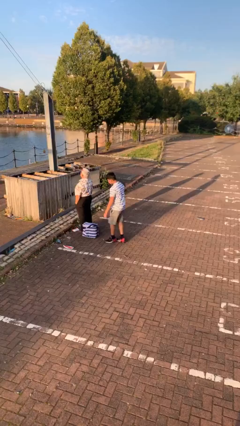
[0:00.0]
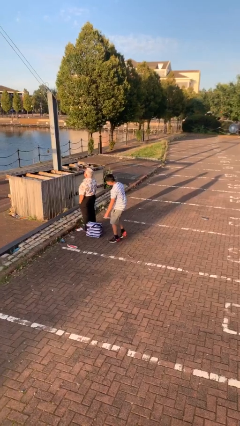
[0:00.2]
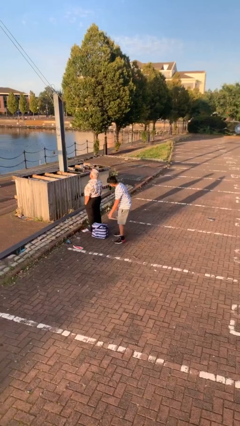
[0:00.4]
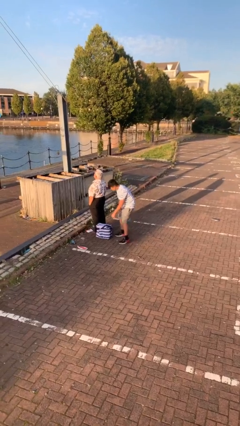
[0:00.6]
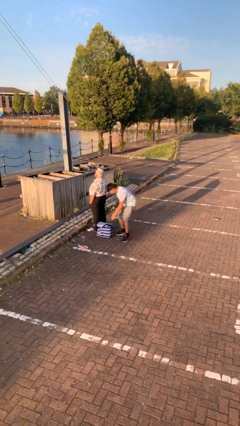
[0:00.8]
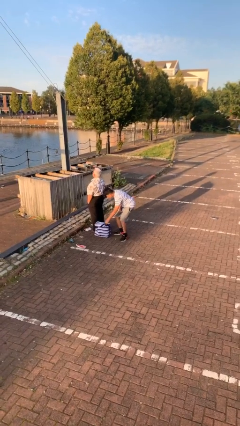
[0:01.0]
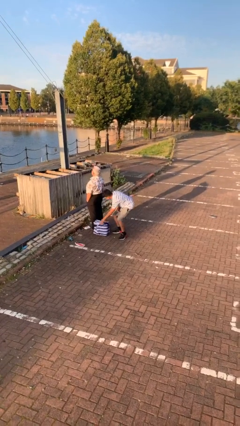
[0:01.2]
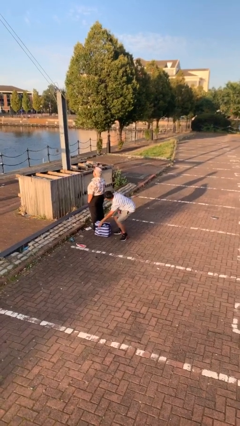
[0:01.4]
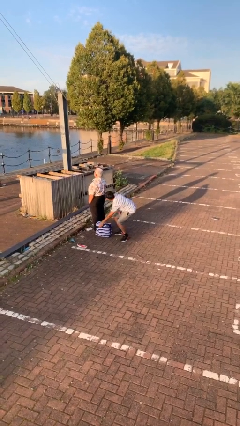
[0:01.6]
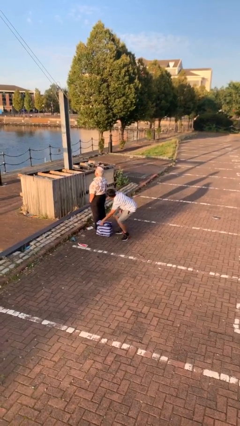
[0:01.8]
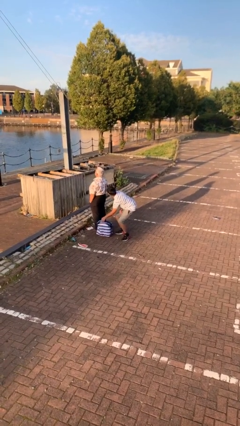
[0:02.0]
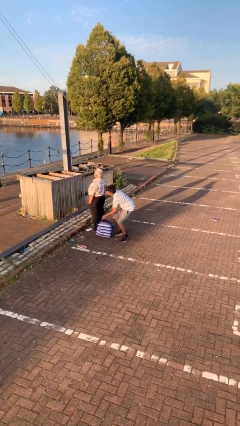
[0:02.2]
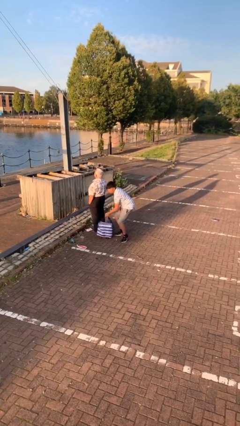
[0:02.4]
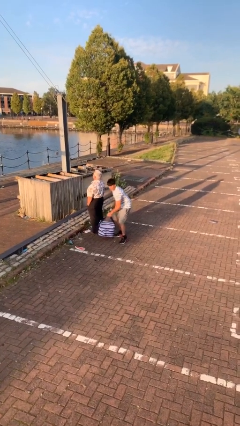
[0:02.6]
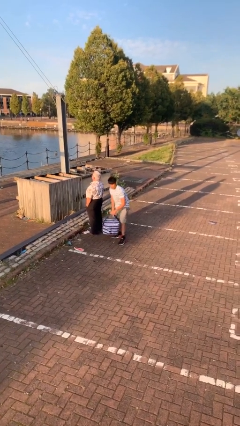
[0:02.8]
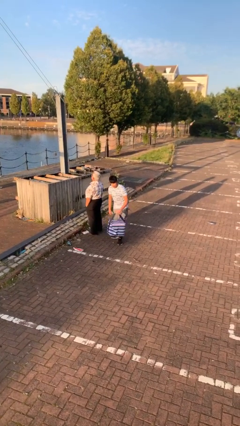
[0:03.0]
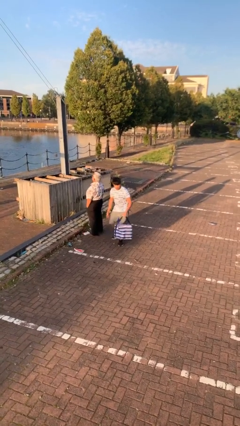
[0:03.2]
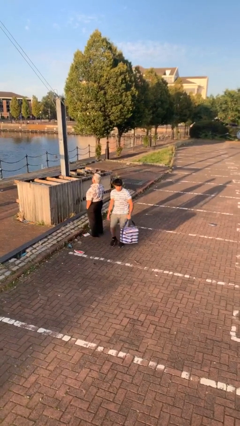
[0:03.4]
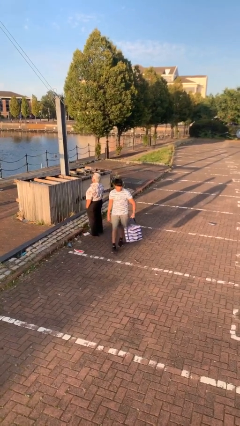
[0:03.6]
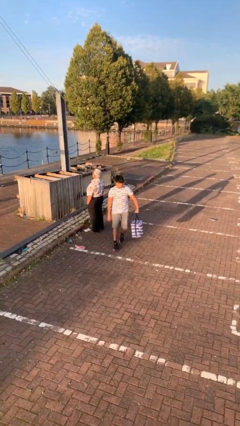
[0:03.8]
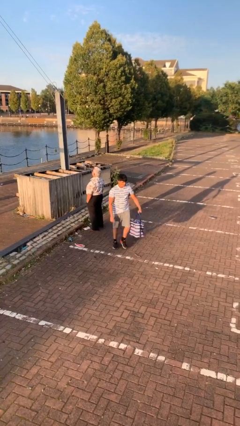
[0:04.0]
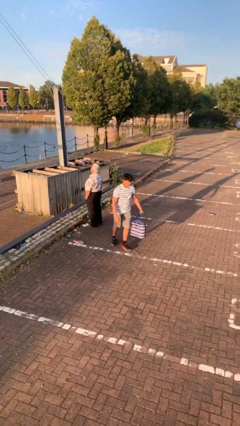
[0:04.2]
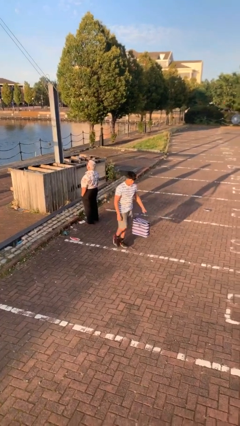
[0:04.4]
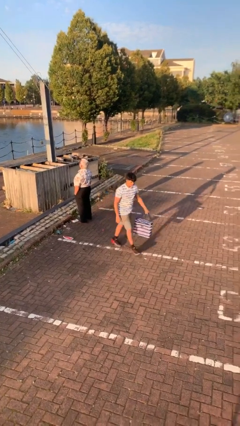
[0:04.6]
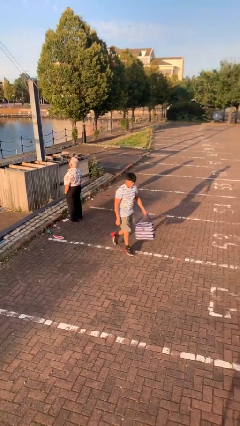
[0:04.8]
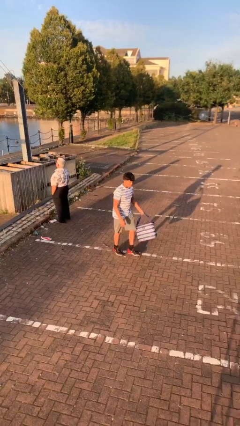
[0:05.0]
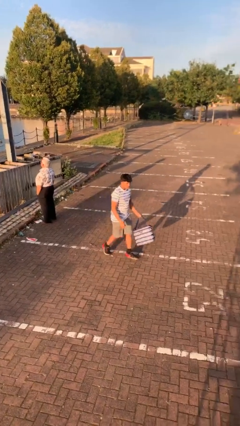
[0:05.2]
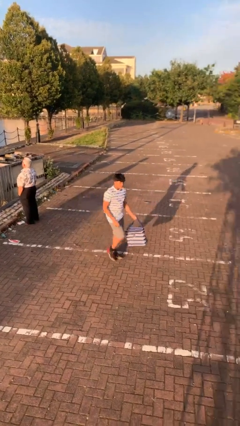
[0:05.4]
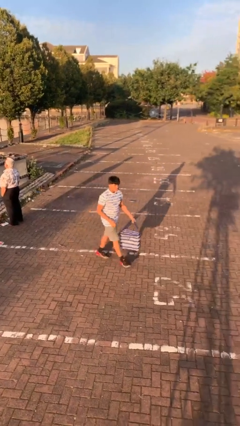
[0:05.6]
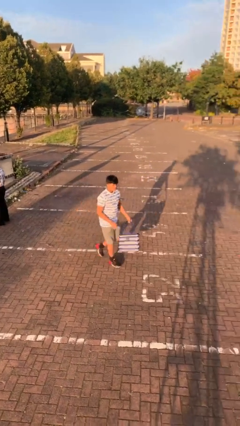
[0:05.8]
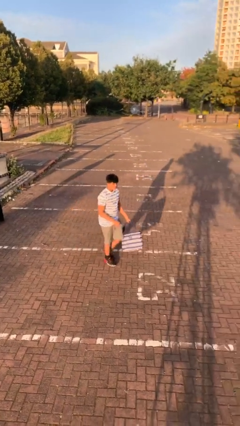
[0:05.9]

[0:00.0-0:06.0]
person steals object from person

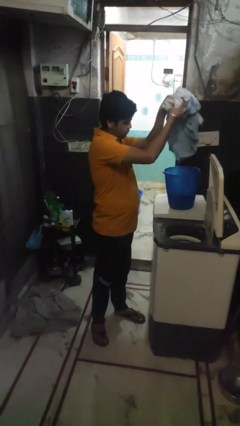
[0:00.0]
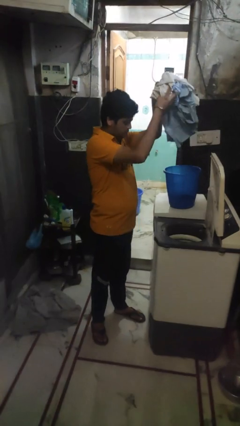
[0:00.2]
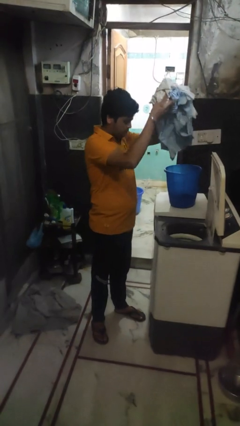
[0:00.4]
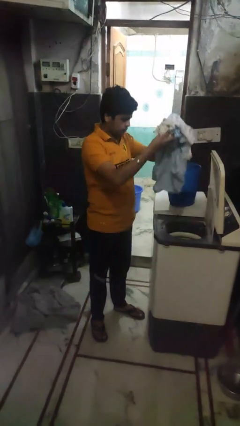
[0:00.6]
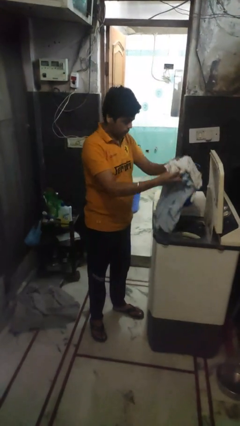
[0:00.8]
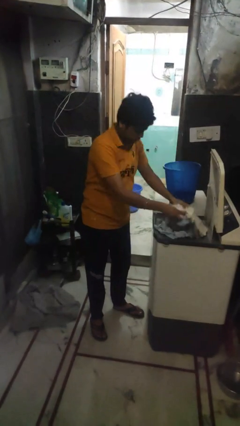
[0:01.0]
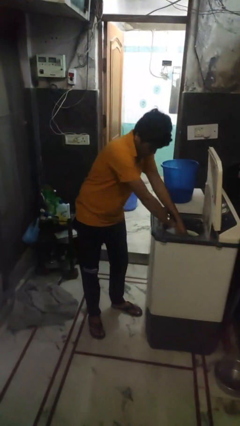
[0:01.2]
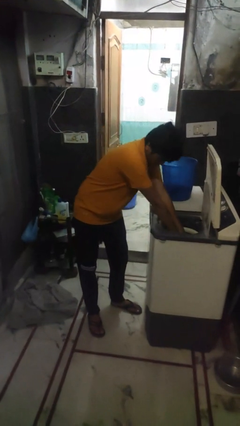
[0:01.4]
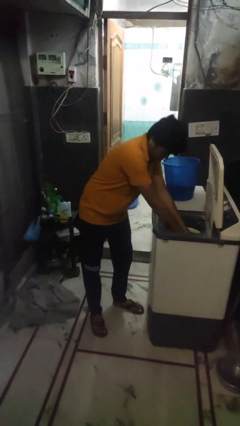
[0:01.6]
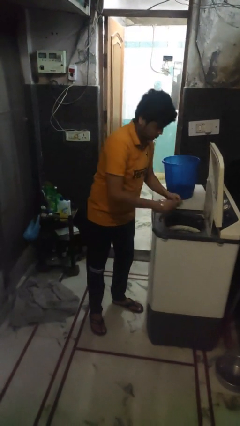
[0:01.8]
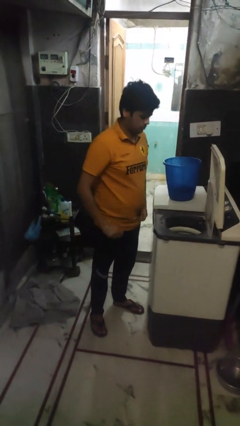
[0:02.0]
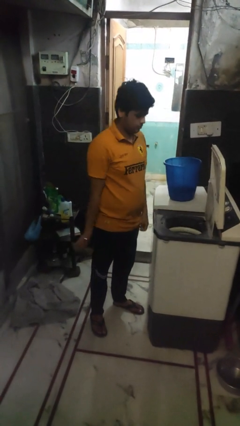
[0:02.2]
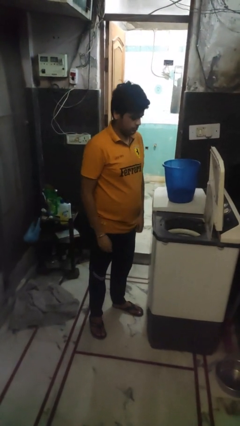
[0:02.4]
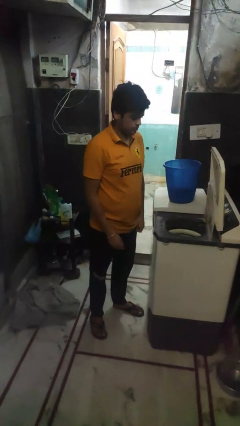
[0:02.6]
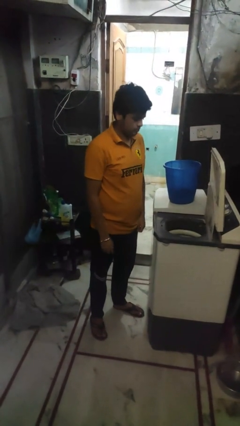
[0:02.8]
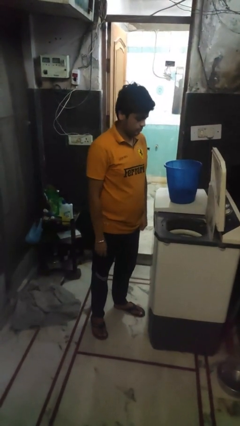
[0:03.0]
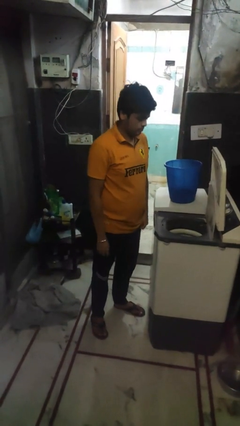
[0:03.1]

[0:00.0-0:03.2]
person loads clotheswasher

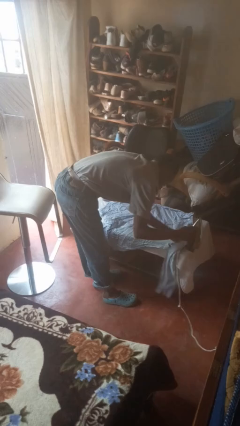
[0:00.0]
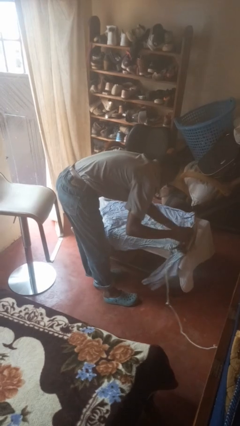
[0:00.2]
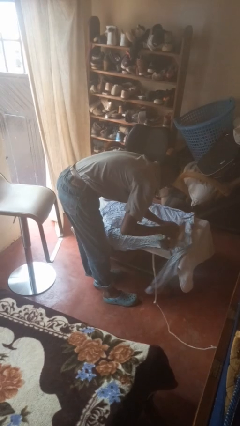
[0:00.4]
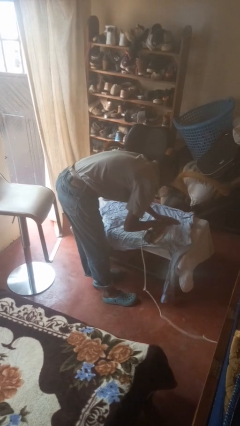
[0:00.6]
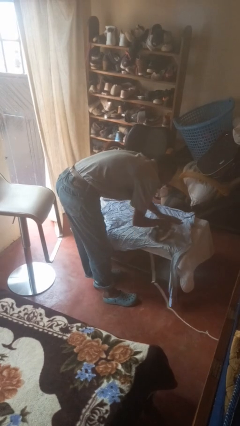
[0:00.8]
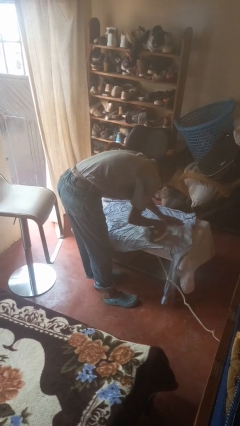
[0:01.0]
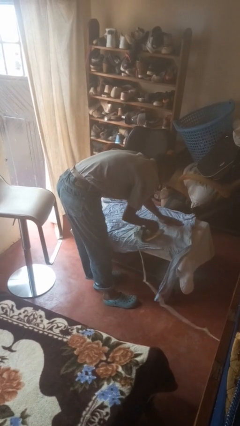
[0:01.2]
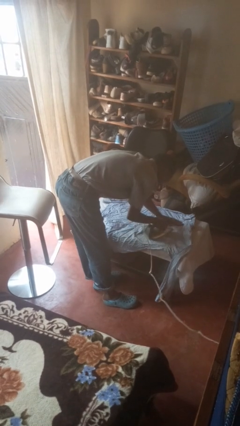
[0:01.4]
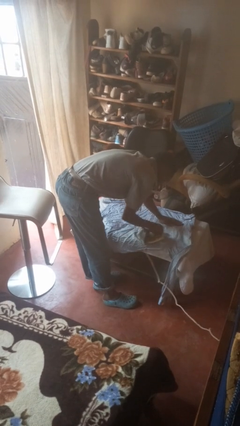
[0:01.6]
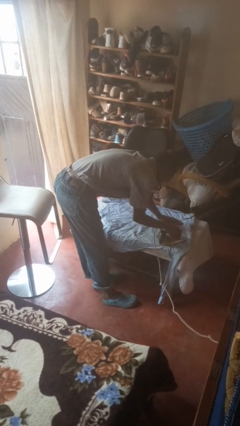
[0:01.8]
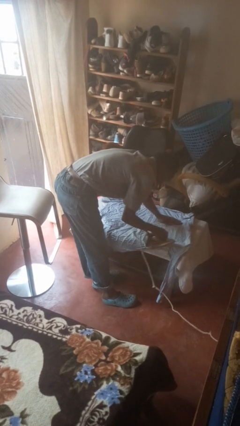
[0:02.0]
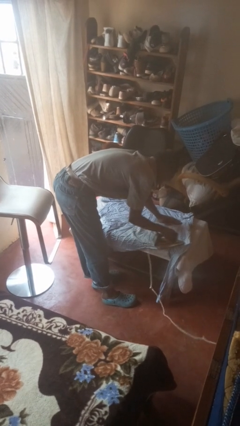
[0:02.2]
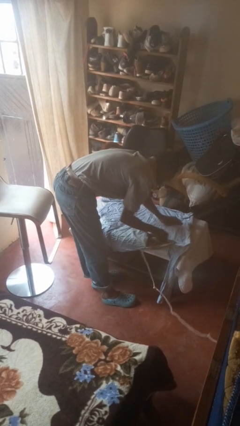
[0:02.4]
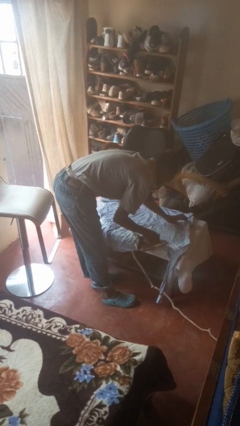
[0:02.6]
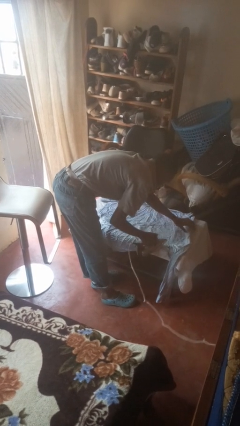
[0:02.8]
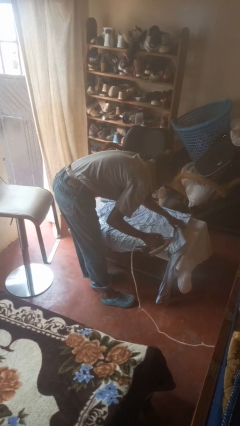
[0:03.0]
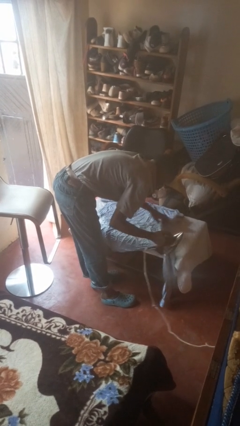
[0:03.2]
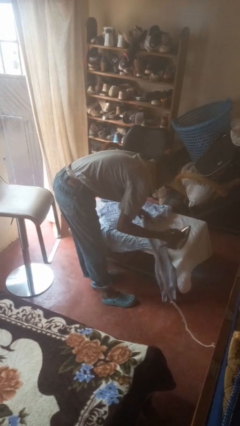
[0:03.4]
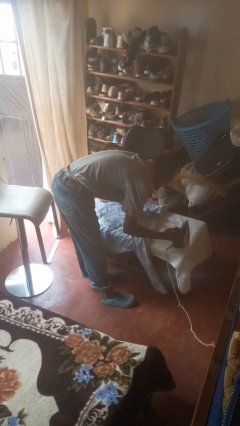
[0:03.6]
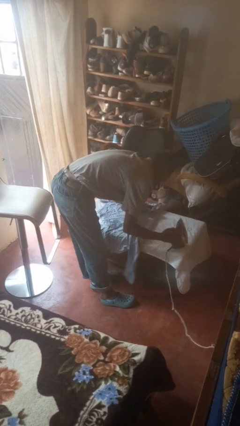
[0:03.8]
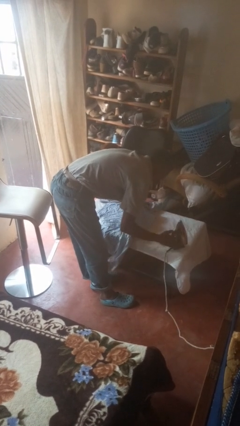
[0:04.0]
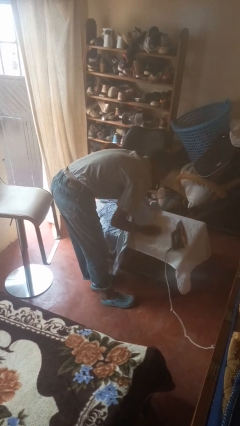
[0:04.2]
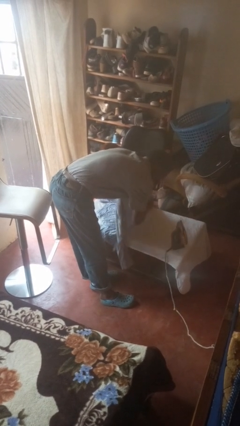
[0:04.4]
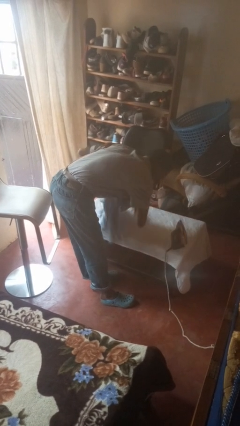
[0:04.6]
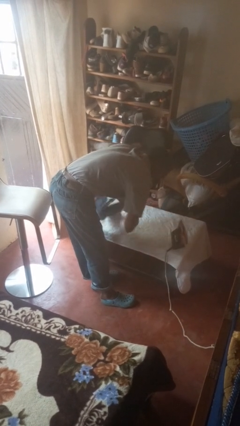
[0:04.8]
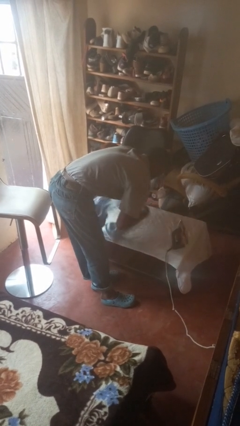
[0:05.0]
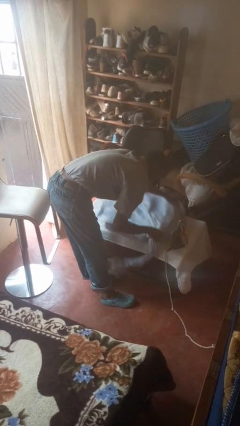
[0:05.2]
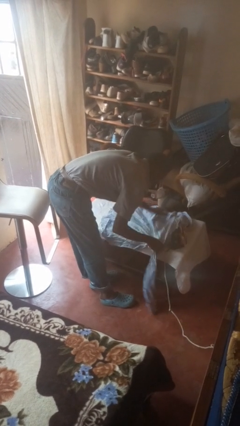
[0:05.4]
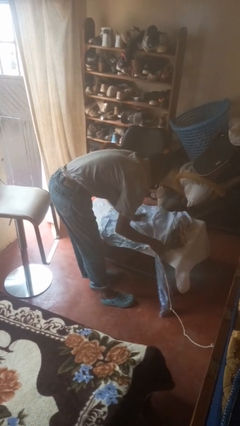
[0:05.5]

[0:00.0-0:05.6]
person irons clothes

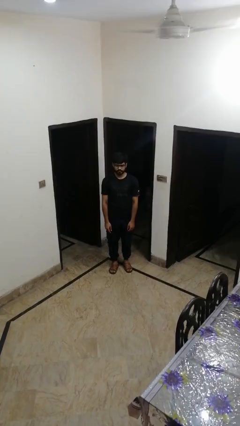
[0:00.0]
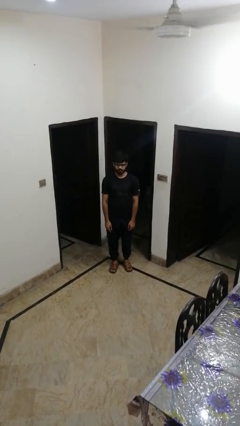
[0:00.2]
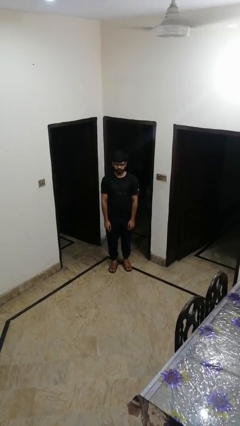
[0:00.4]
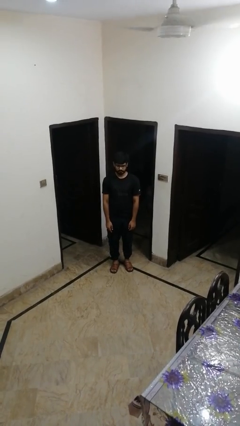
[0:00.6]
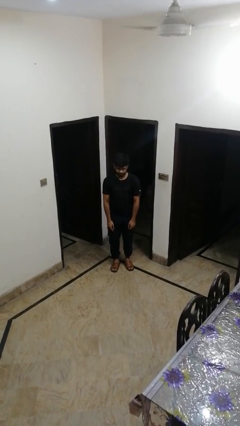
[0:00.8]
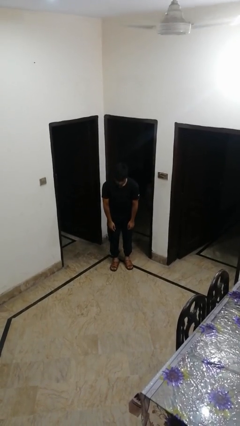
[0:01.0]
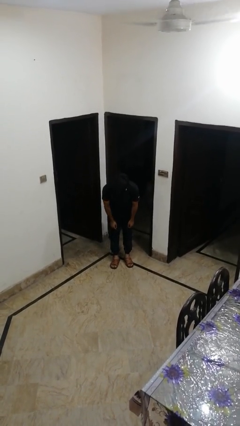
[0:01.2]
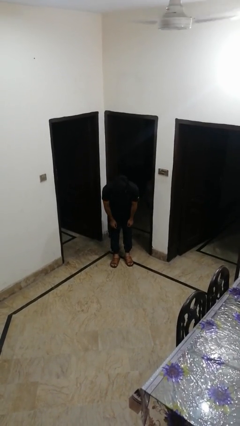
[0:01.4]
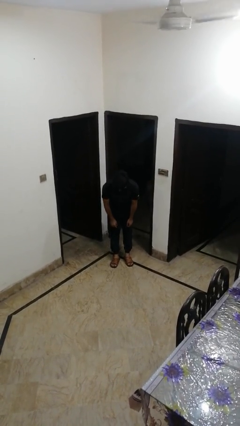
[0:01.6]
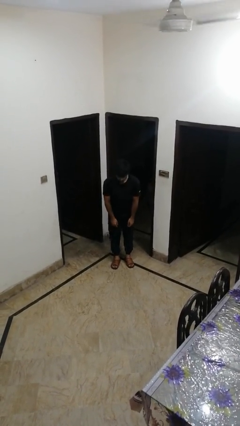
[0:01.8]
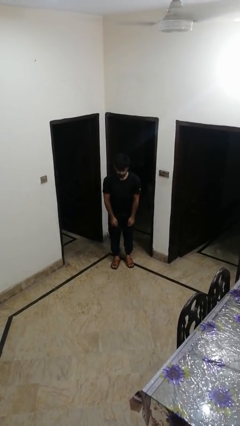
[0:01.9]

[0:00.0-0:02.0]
person bows

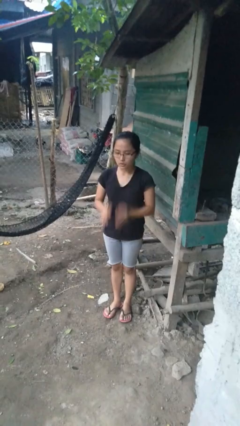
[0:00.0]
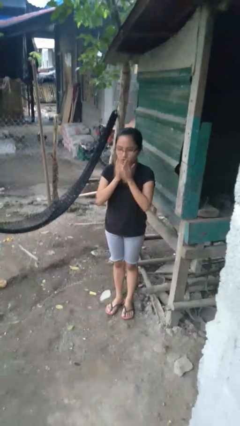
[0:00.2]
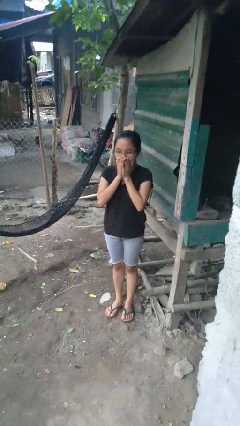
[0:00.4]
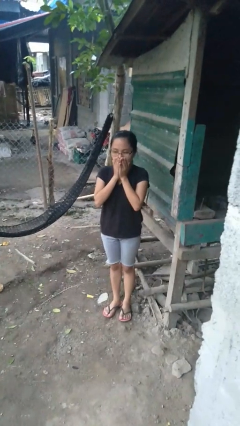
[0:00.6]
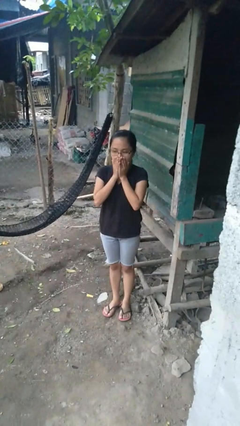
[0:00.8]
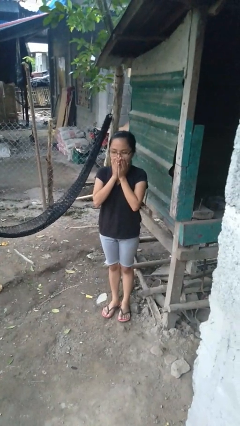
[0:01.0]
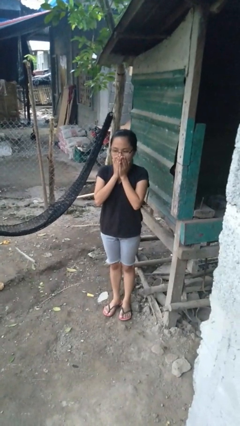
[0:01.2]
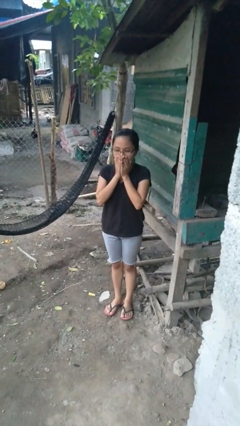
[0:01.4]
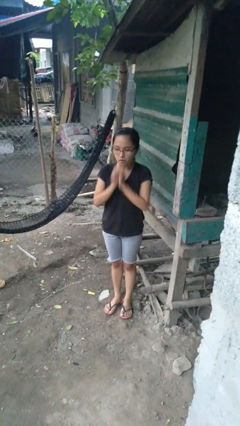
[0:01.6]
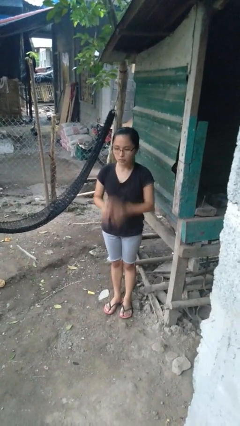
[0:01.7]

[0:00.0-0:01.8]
person blows into hands
